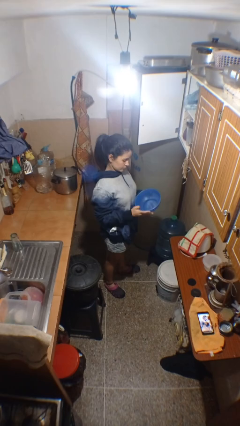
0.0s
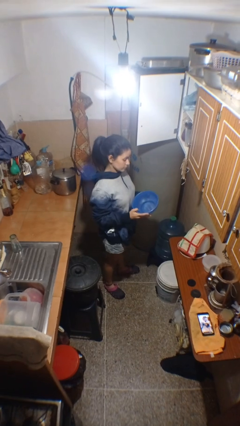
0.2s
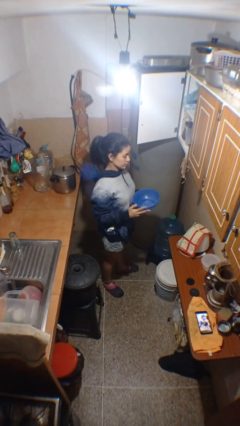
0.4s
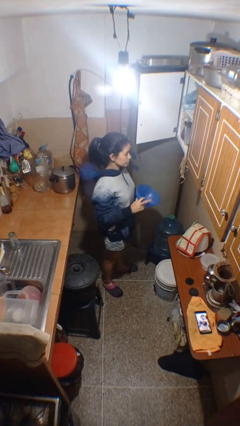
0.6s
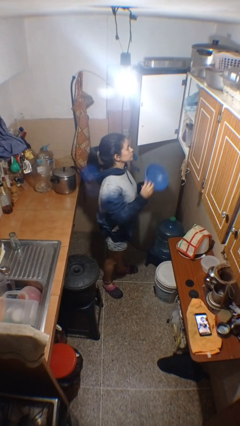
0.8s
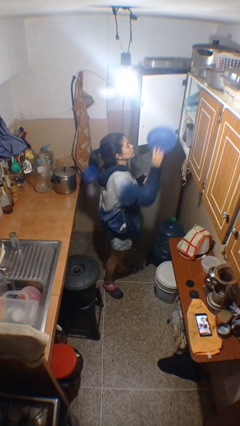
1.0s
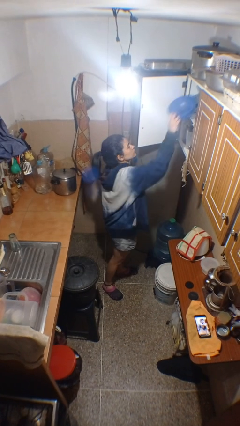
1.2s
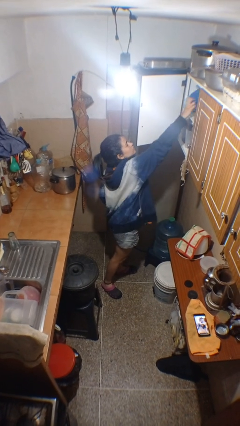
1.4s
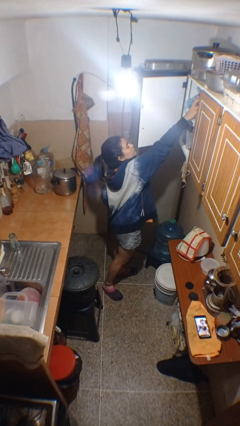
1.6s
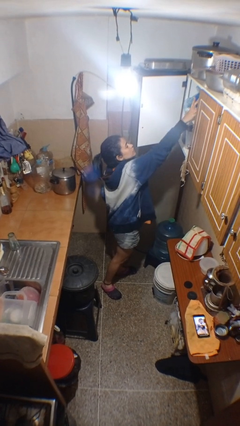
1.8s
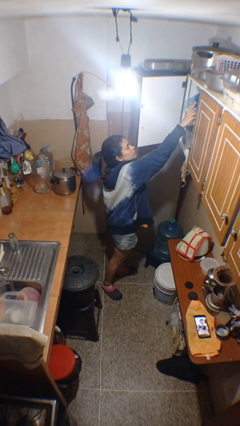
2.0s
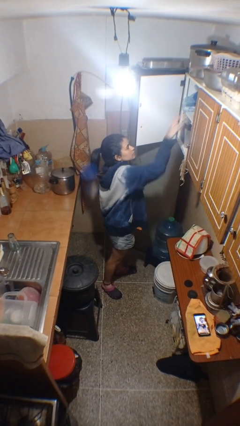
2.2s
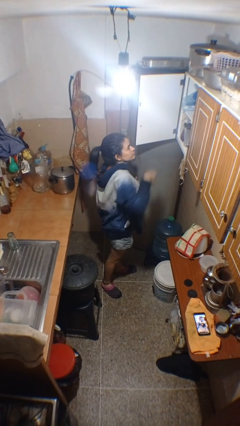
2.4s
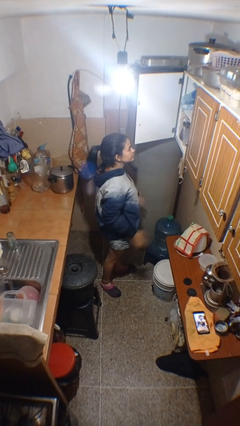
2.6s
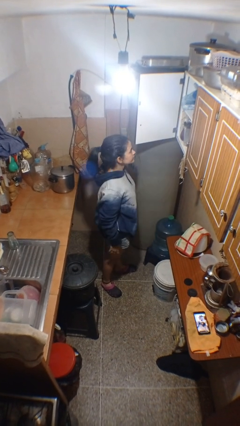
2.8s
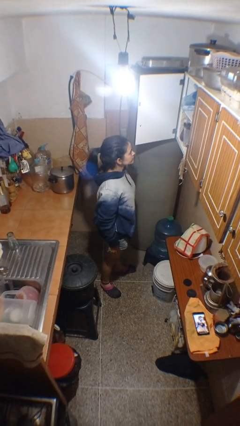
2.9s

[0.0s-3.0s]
person puts down object into cabinet

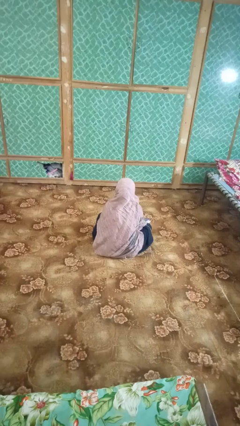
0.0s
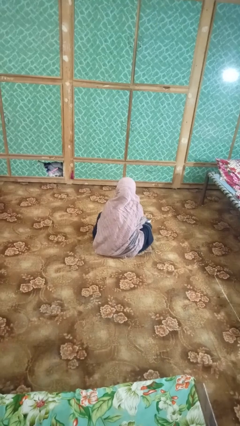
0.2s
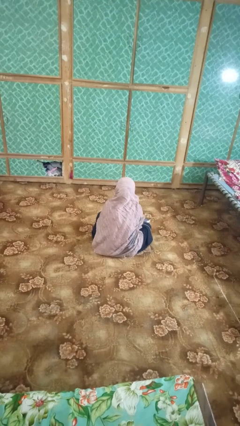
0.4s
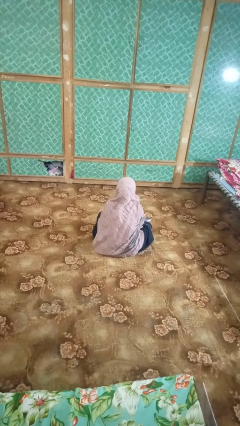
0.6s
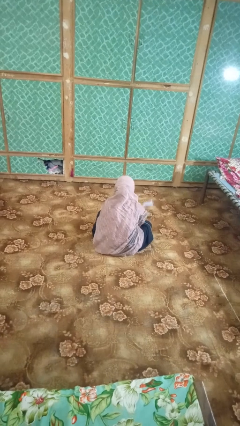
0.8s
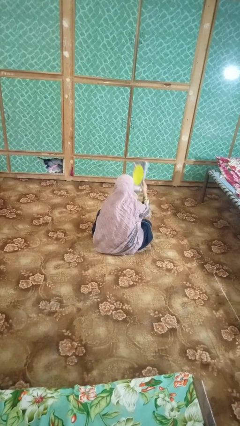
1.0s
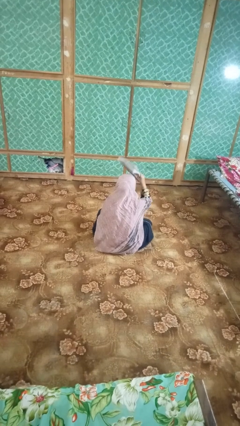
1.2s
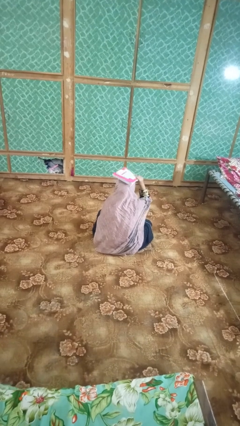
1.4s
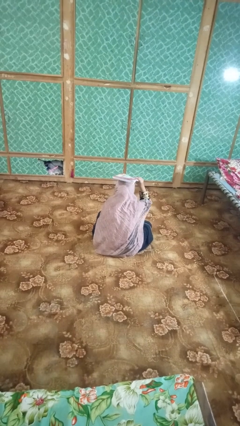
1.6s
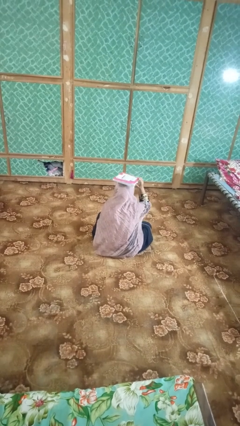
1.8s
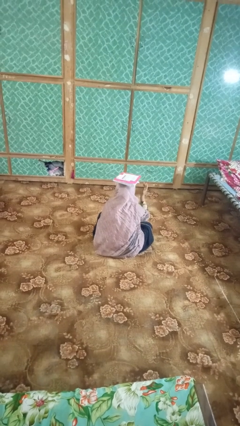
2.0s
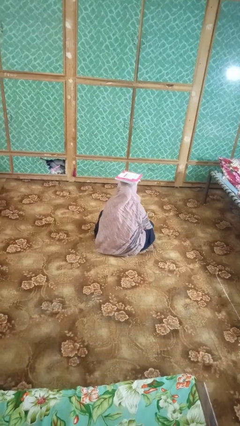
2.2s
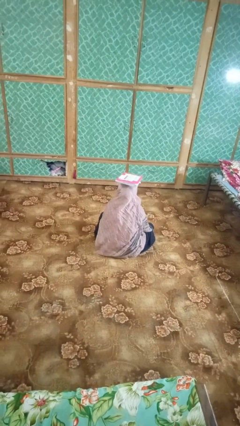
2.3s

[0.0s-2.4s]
person holds object above head

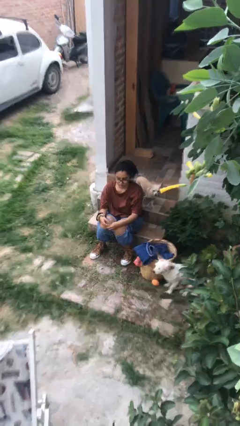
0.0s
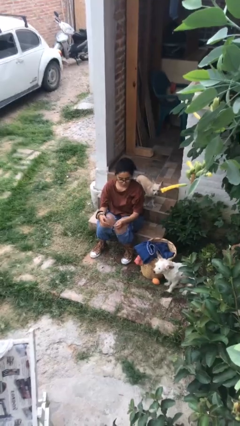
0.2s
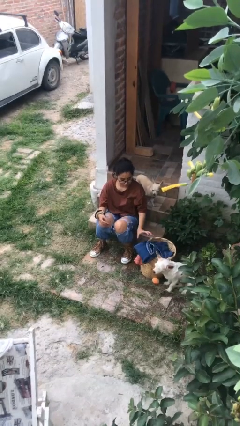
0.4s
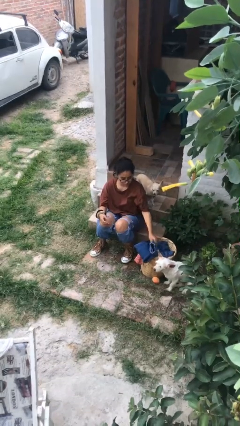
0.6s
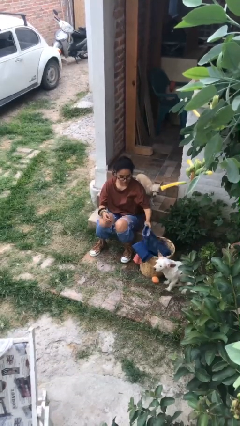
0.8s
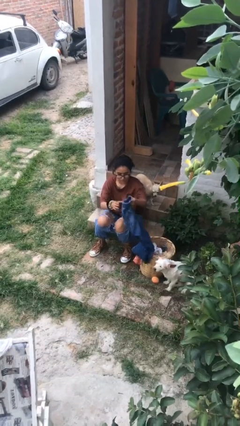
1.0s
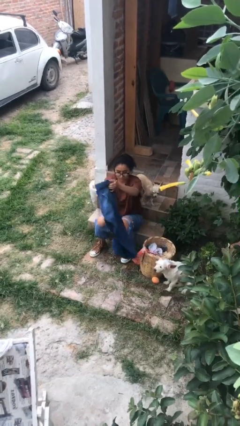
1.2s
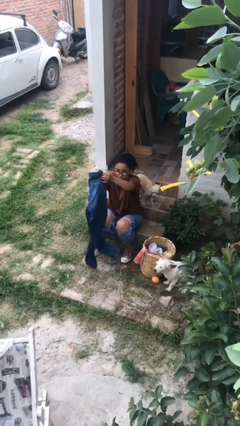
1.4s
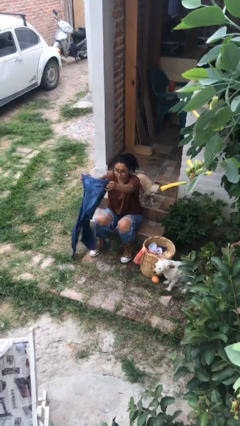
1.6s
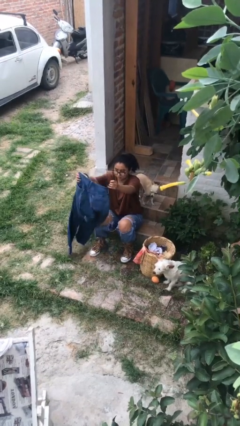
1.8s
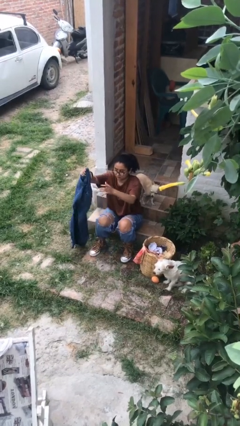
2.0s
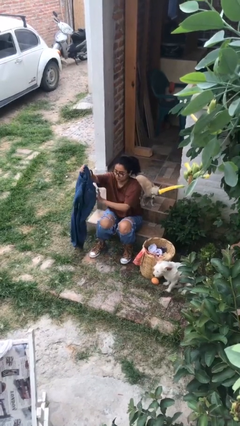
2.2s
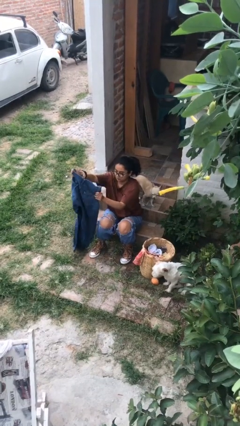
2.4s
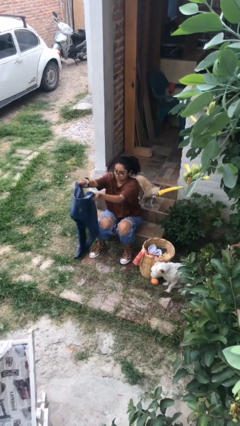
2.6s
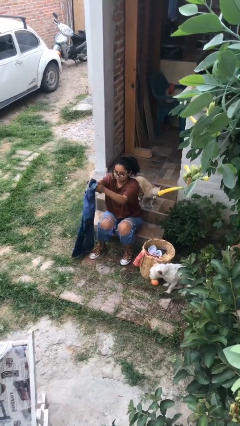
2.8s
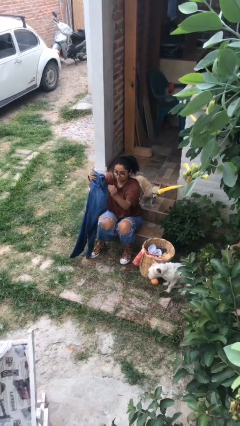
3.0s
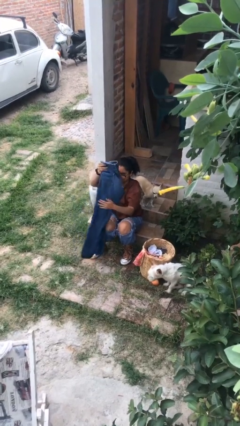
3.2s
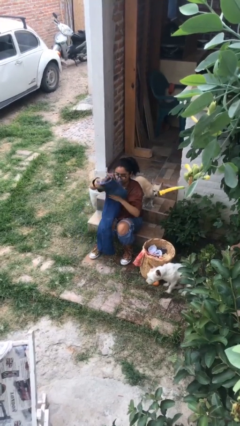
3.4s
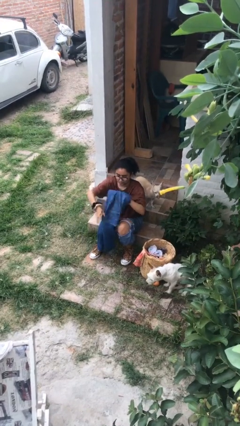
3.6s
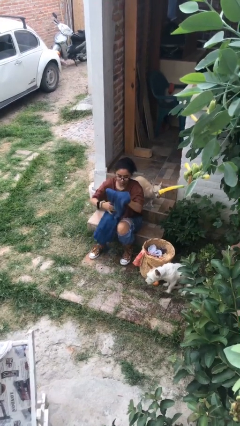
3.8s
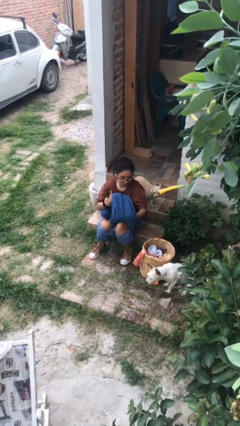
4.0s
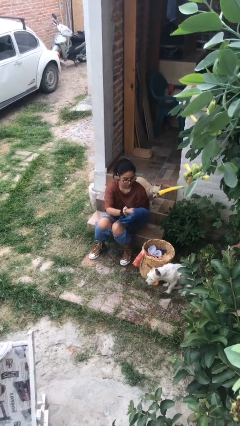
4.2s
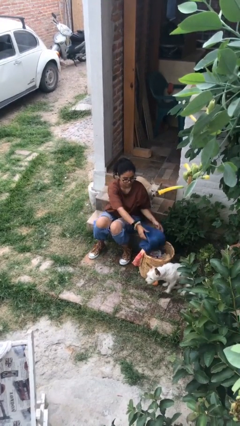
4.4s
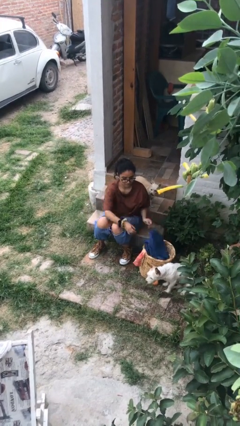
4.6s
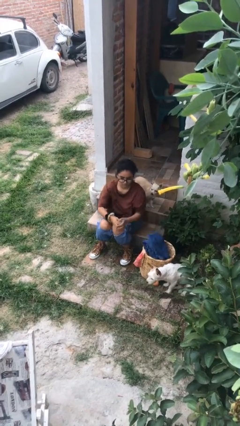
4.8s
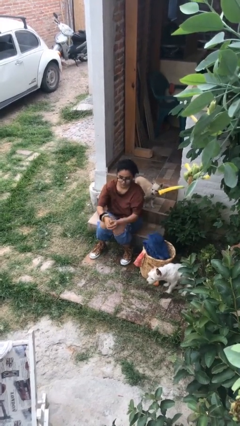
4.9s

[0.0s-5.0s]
person folds pants

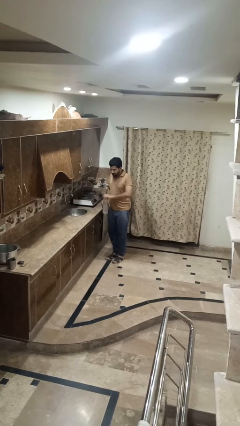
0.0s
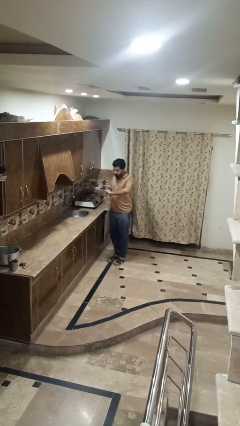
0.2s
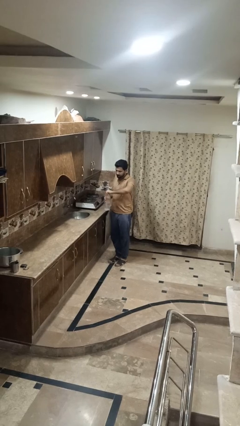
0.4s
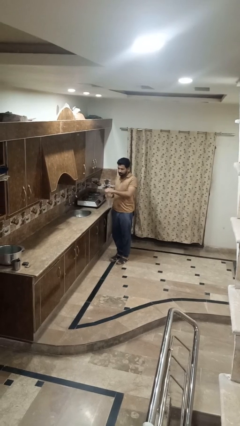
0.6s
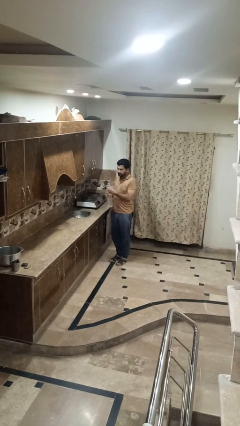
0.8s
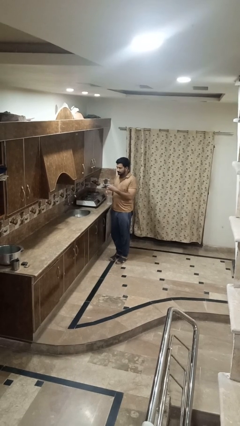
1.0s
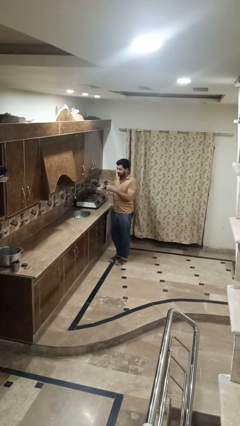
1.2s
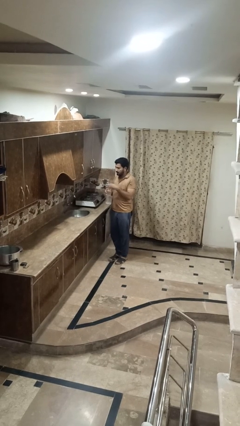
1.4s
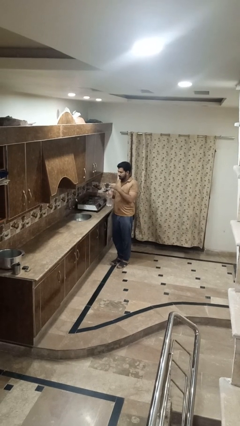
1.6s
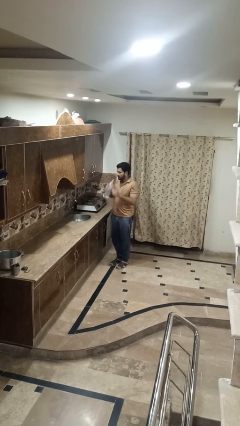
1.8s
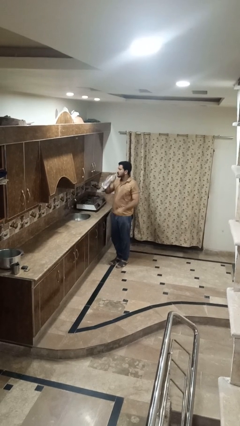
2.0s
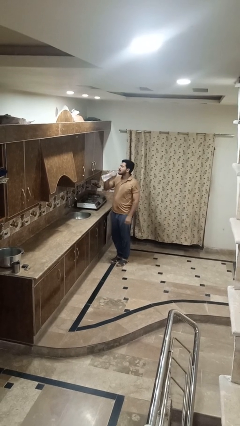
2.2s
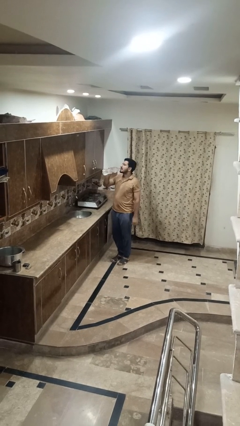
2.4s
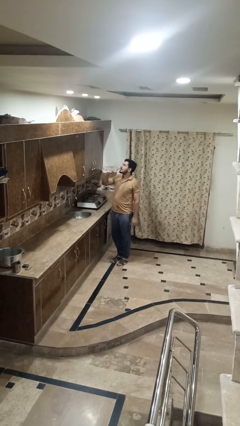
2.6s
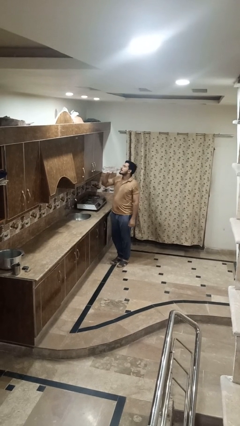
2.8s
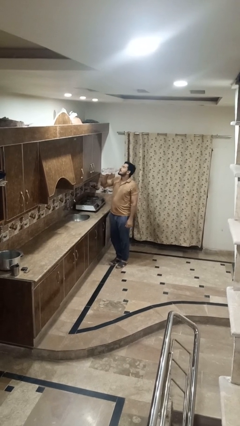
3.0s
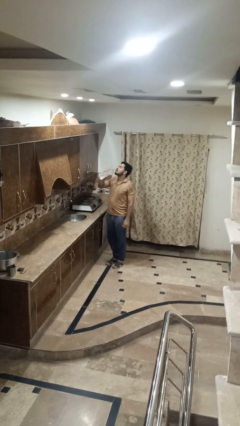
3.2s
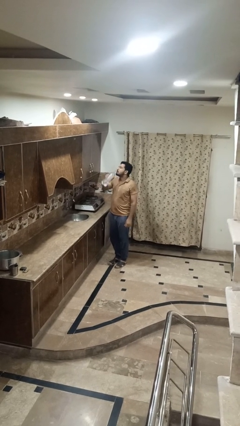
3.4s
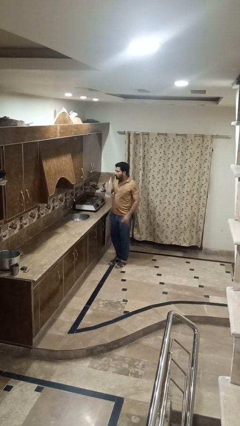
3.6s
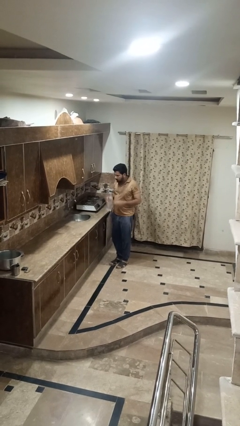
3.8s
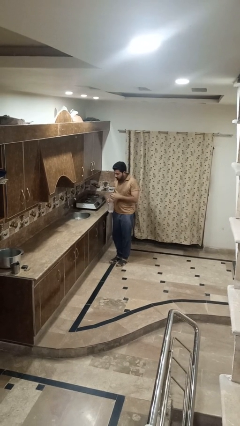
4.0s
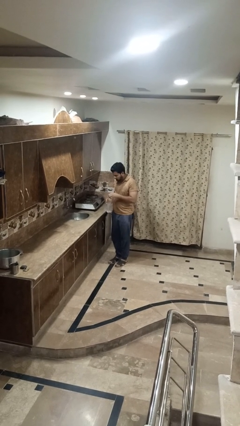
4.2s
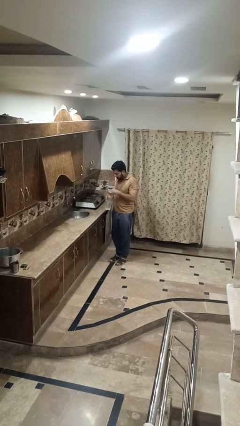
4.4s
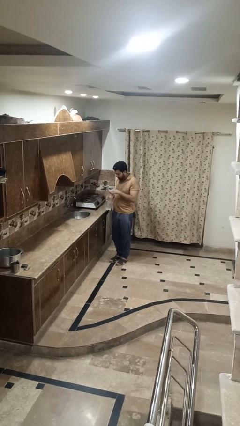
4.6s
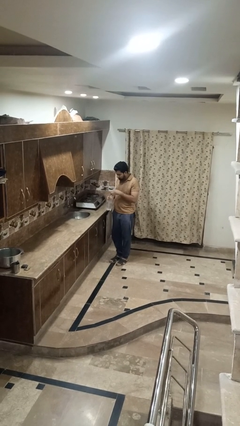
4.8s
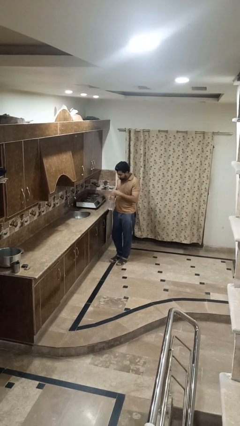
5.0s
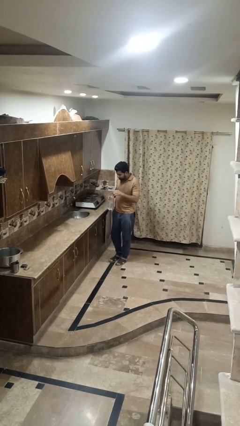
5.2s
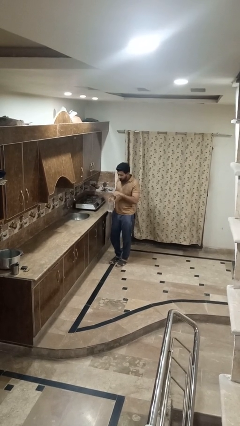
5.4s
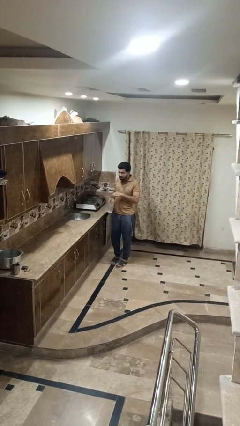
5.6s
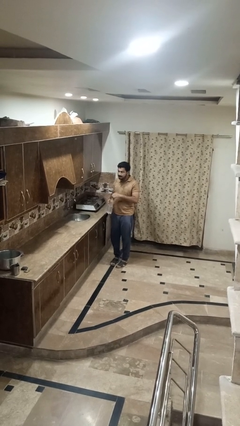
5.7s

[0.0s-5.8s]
person drinks from bottle

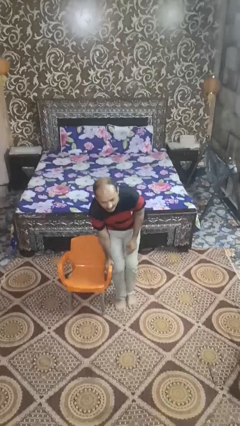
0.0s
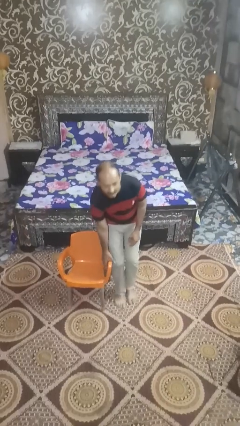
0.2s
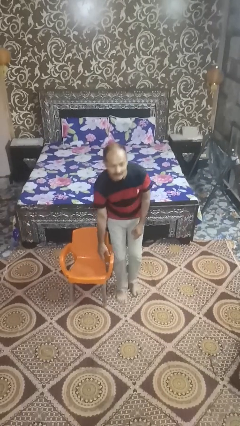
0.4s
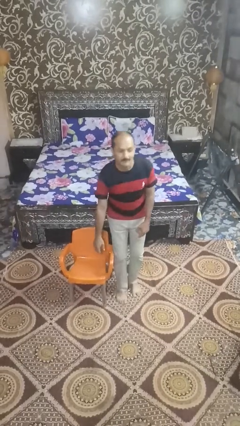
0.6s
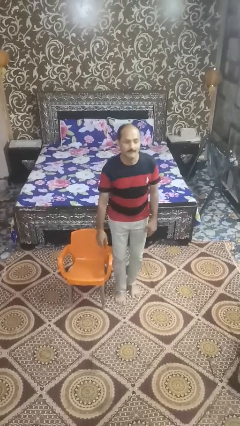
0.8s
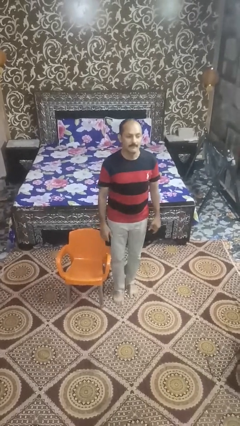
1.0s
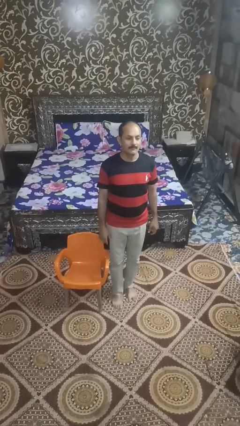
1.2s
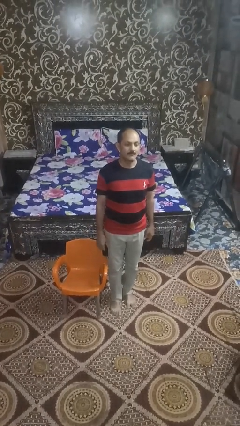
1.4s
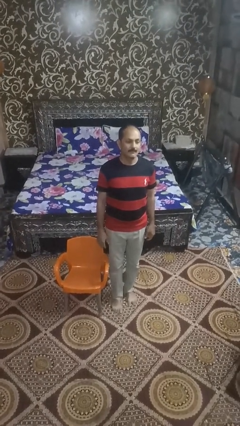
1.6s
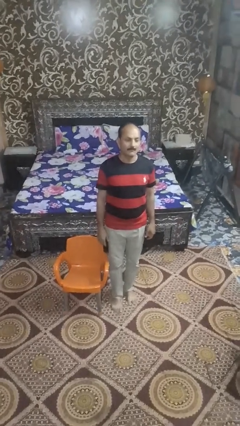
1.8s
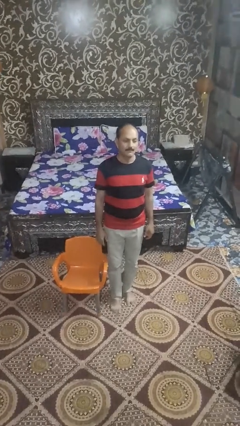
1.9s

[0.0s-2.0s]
person stands up from floor
